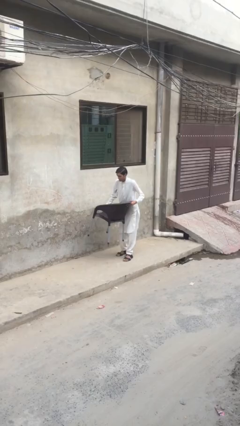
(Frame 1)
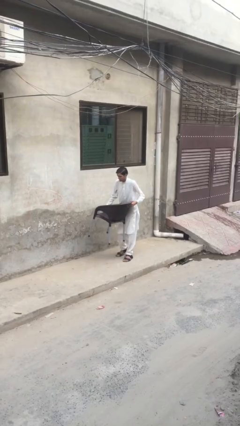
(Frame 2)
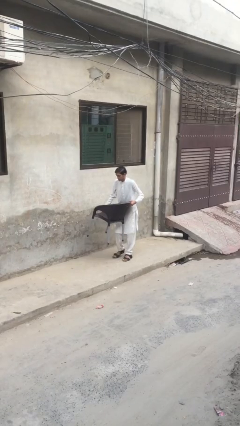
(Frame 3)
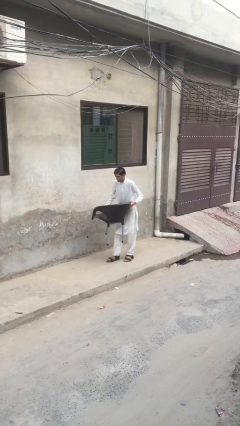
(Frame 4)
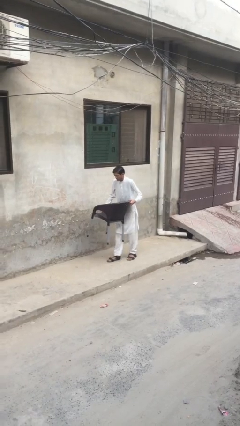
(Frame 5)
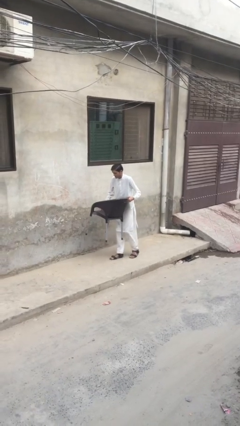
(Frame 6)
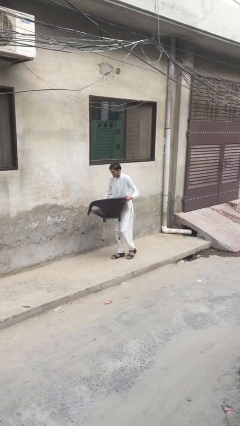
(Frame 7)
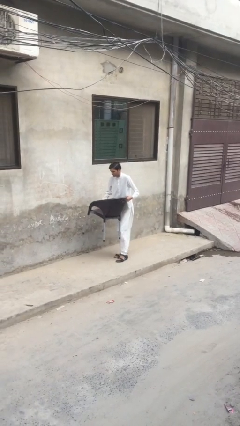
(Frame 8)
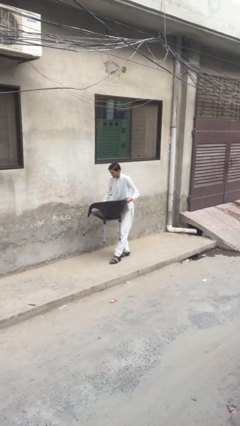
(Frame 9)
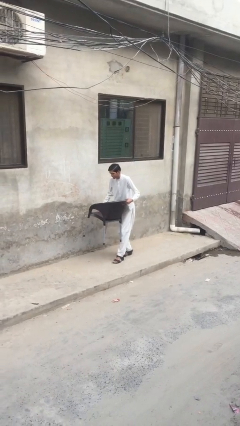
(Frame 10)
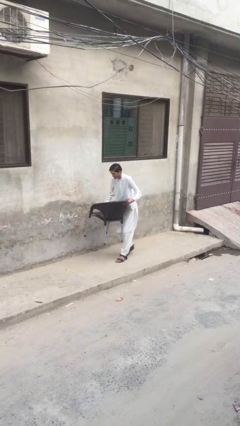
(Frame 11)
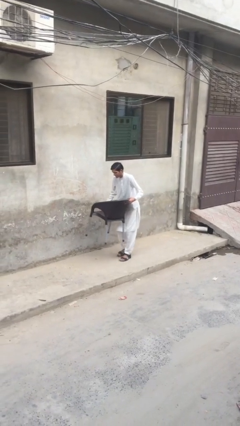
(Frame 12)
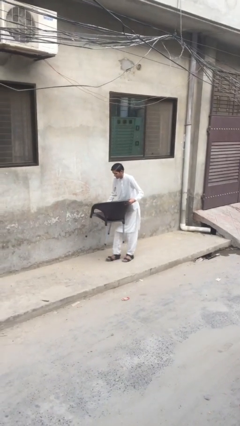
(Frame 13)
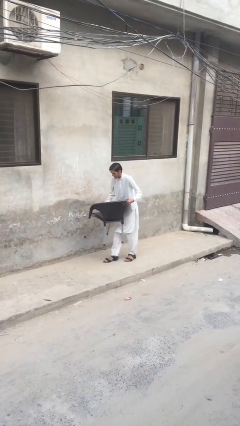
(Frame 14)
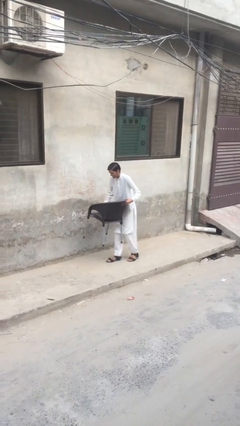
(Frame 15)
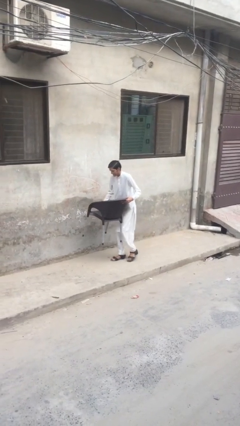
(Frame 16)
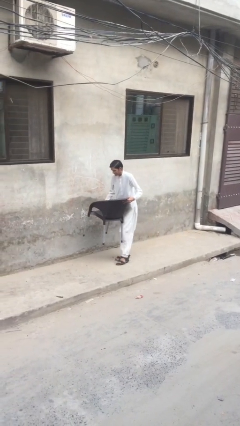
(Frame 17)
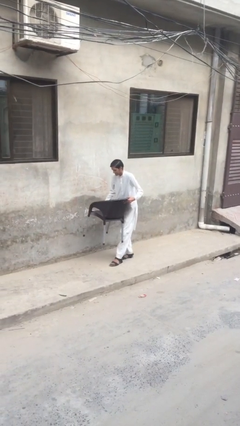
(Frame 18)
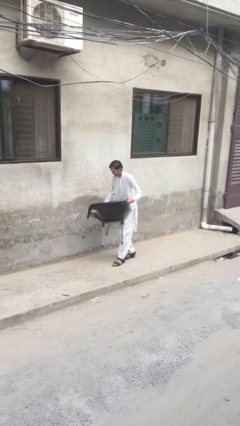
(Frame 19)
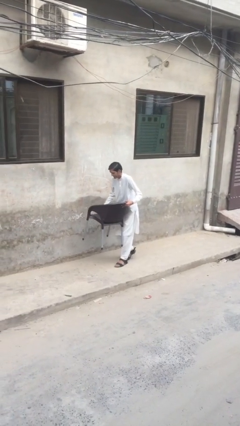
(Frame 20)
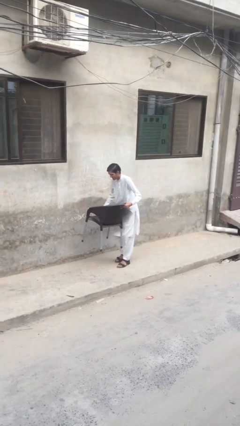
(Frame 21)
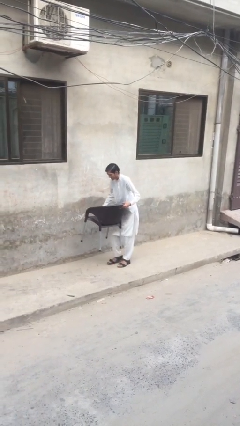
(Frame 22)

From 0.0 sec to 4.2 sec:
person carries heavy object

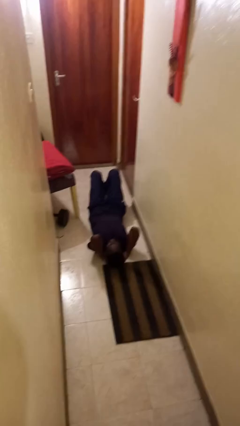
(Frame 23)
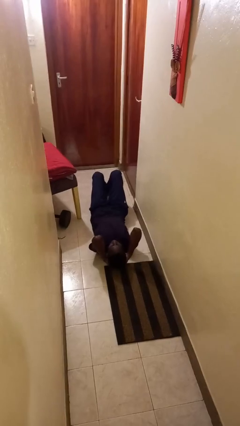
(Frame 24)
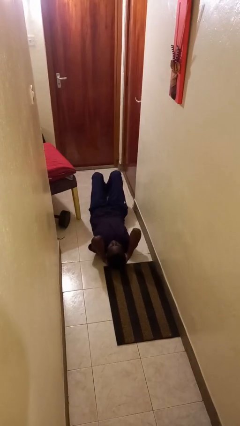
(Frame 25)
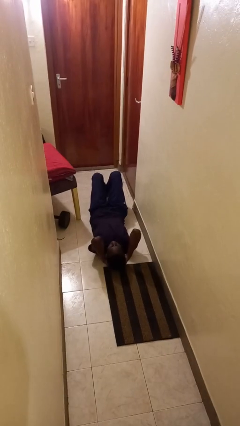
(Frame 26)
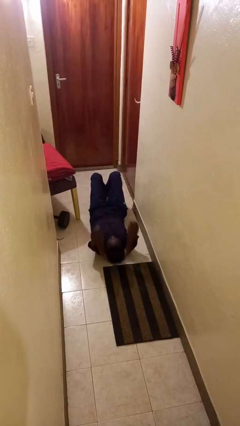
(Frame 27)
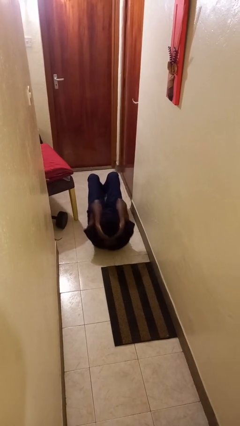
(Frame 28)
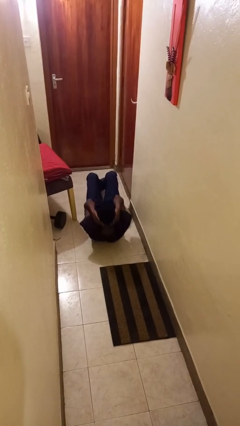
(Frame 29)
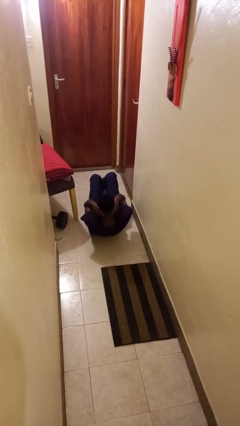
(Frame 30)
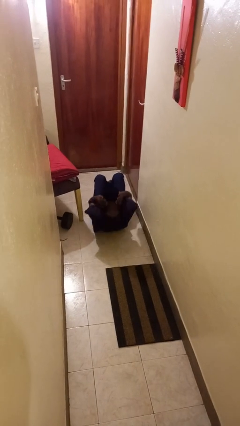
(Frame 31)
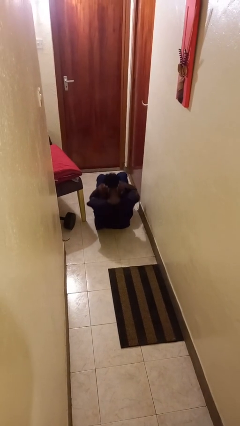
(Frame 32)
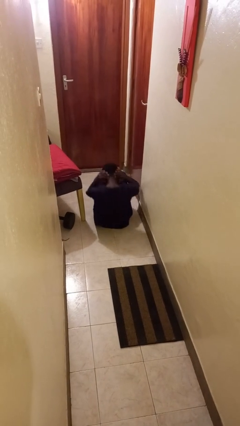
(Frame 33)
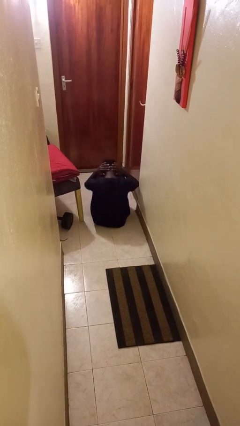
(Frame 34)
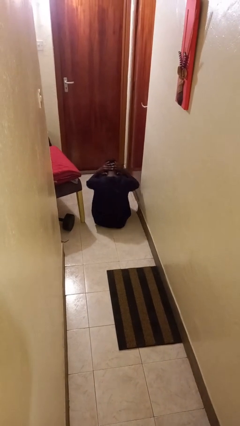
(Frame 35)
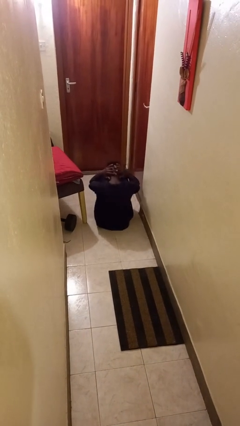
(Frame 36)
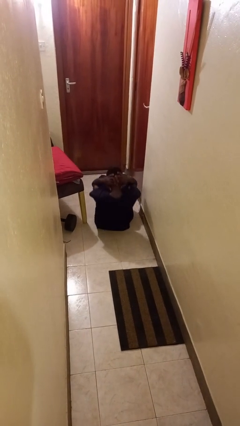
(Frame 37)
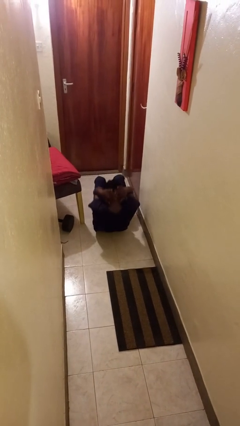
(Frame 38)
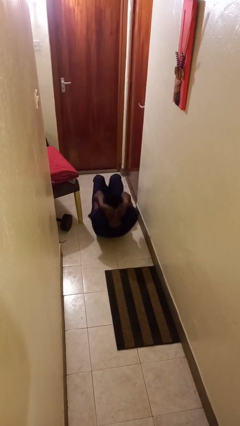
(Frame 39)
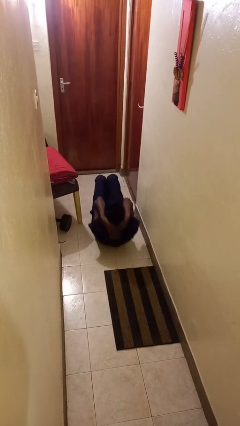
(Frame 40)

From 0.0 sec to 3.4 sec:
person exercises with situp

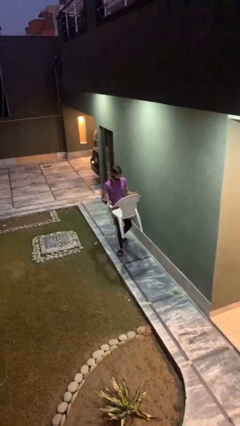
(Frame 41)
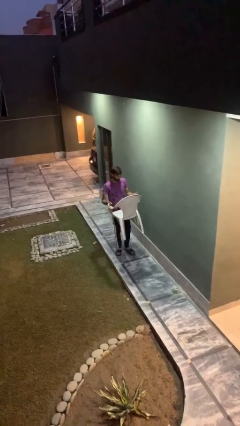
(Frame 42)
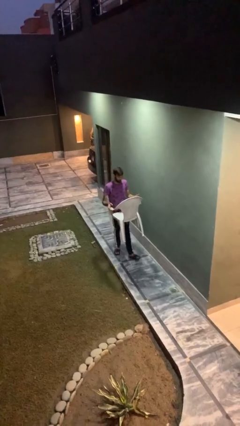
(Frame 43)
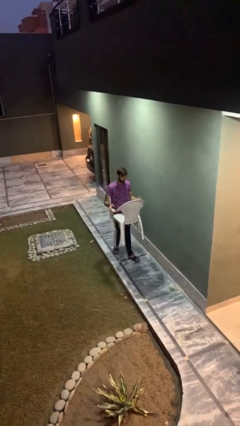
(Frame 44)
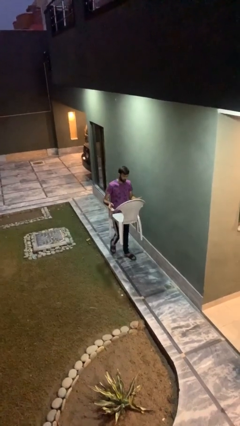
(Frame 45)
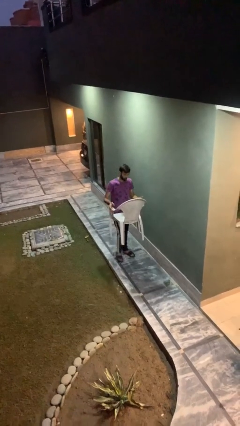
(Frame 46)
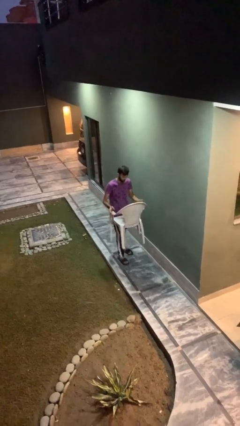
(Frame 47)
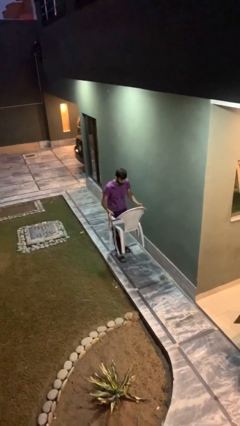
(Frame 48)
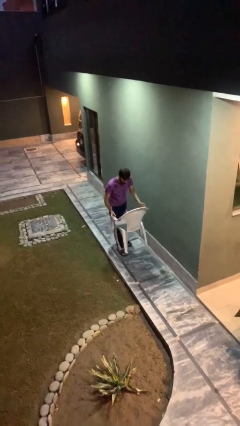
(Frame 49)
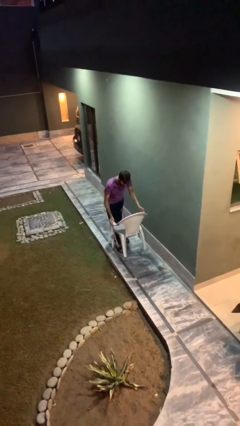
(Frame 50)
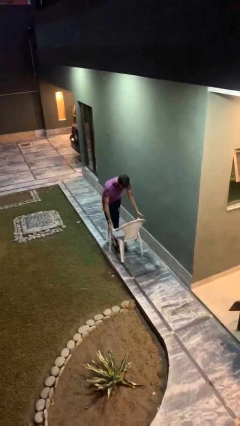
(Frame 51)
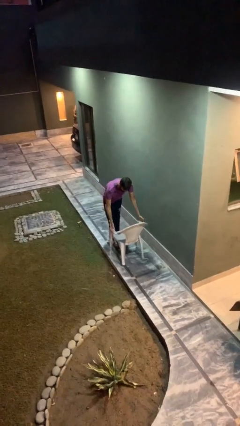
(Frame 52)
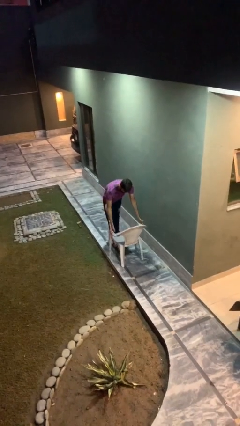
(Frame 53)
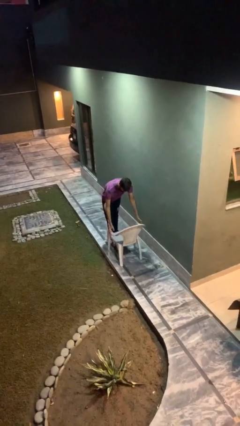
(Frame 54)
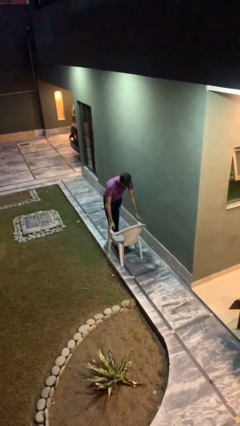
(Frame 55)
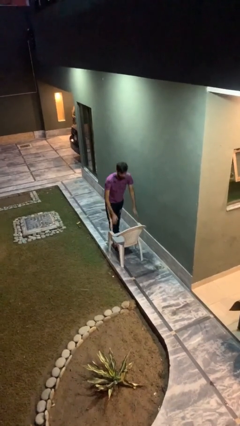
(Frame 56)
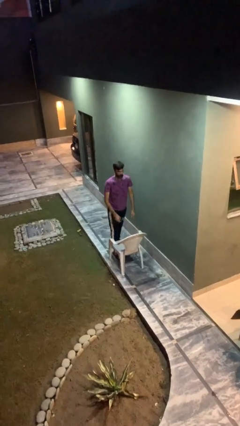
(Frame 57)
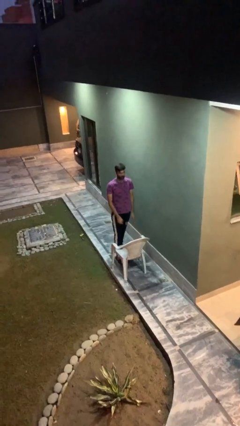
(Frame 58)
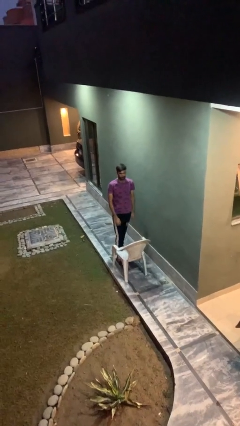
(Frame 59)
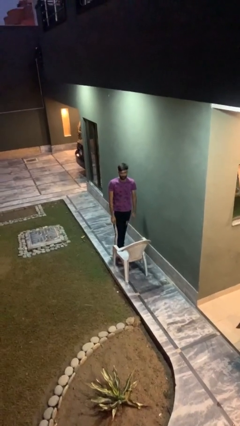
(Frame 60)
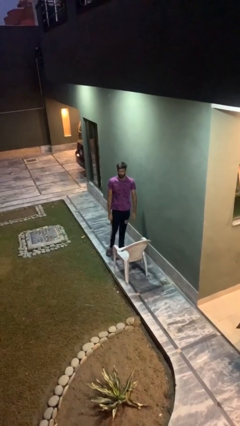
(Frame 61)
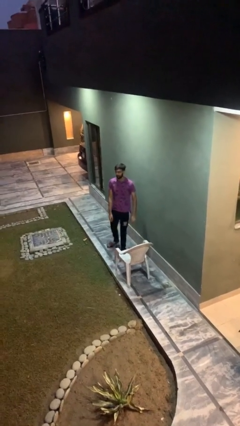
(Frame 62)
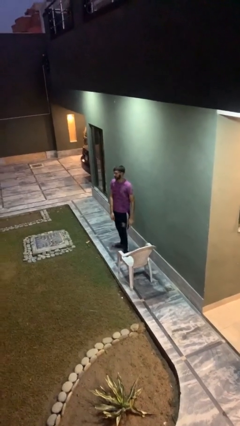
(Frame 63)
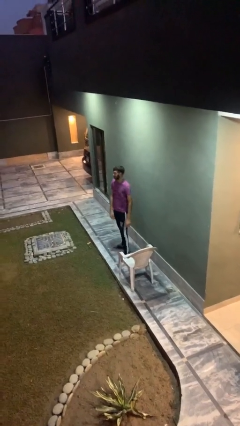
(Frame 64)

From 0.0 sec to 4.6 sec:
person puts down object on floor

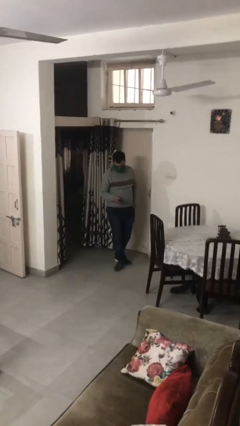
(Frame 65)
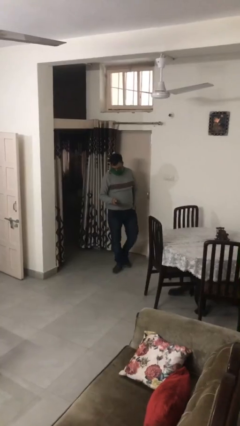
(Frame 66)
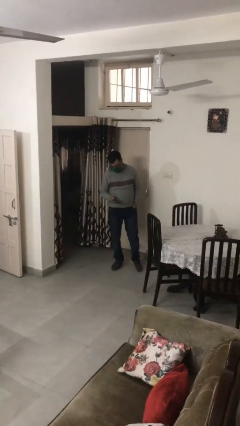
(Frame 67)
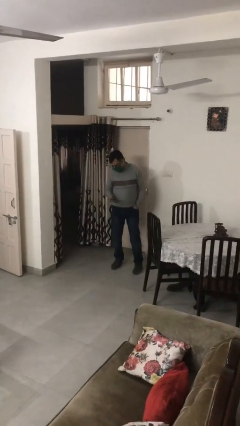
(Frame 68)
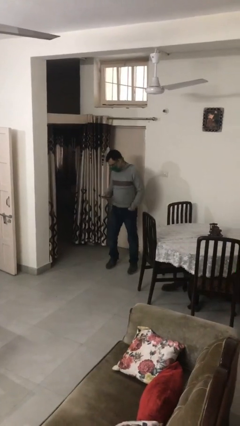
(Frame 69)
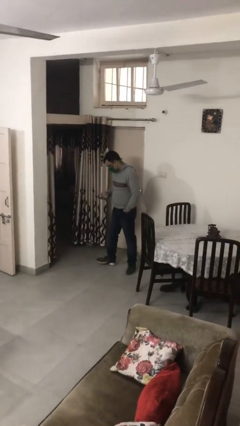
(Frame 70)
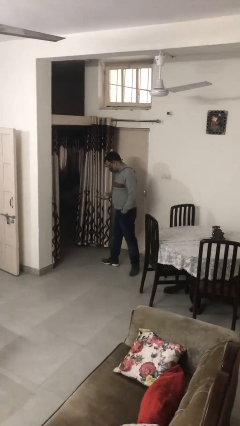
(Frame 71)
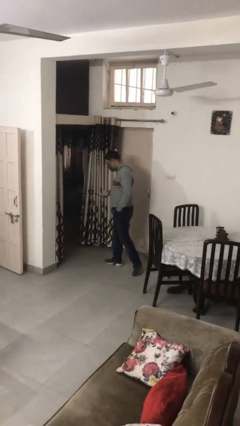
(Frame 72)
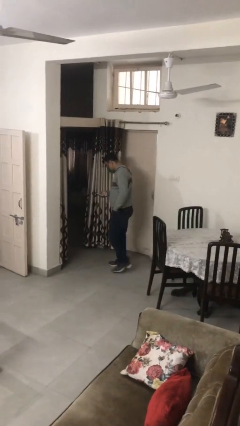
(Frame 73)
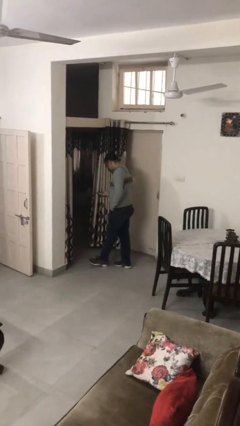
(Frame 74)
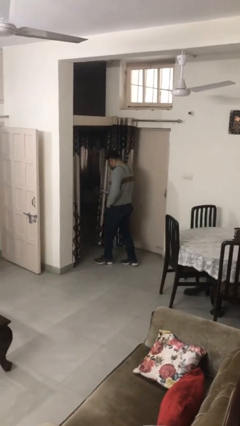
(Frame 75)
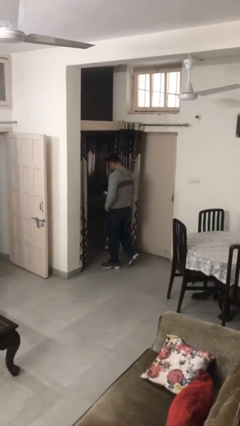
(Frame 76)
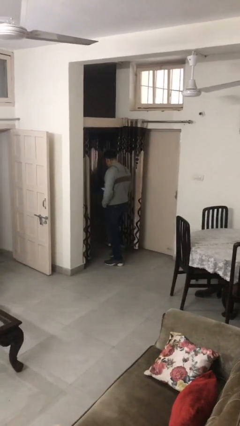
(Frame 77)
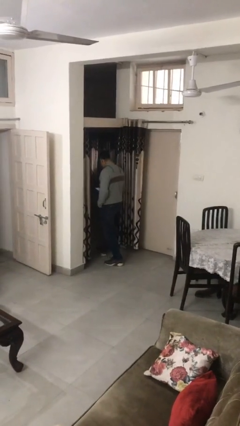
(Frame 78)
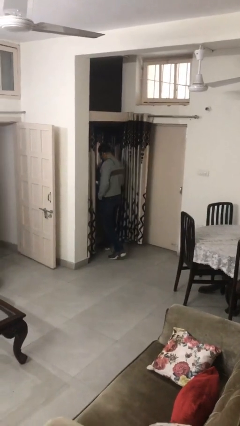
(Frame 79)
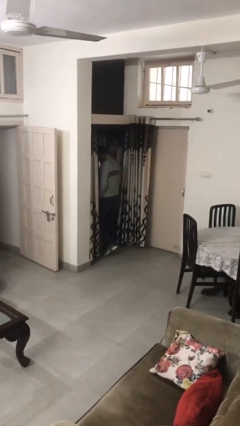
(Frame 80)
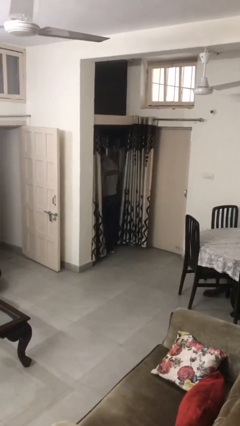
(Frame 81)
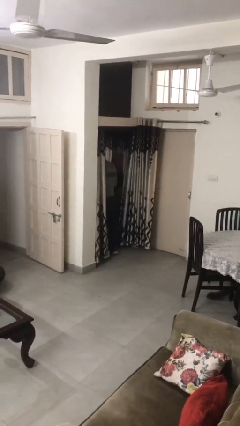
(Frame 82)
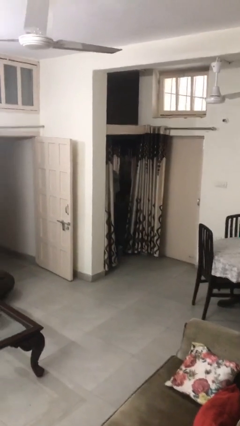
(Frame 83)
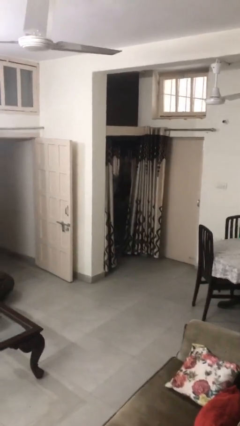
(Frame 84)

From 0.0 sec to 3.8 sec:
person exits scene through structure

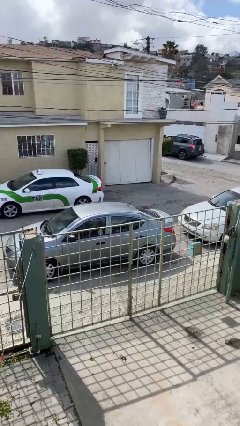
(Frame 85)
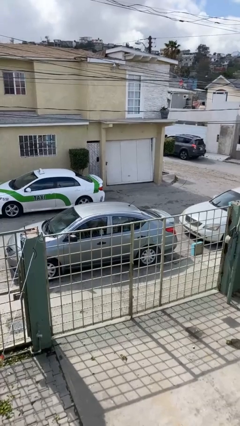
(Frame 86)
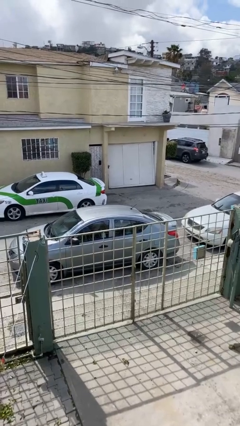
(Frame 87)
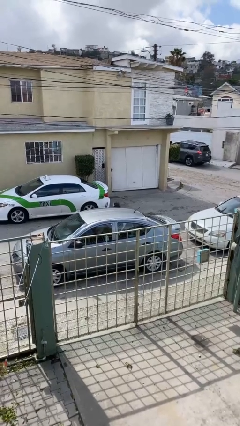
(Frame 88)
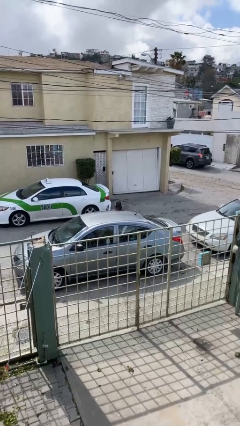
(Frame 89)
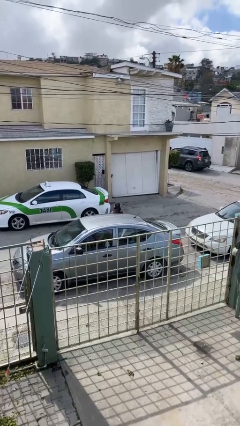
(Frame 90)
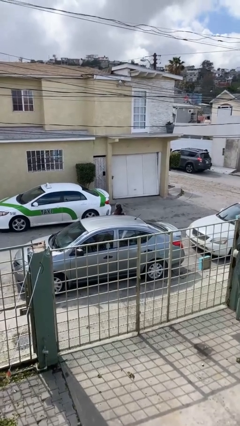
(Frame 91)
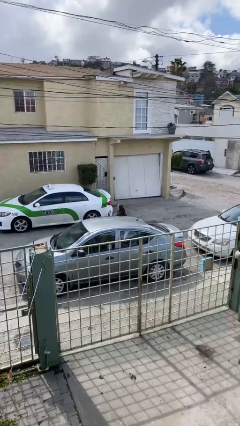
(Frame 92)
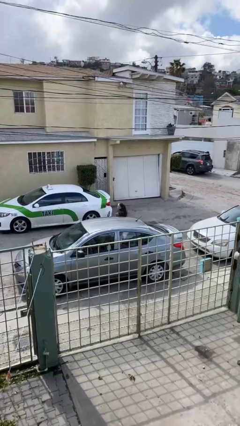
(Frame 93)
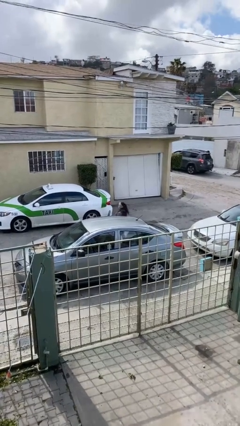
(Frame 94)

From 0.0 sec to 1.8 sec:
person exits car

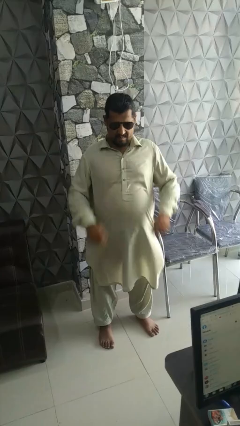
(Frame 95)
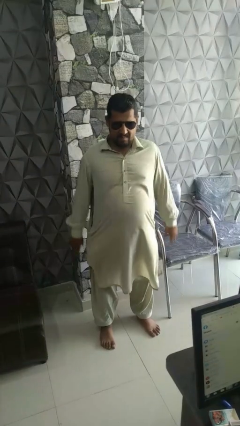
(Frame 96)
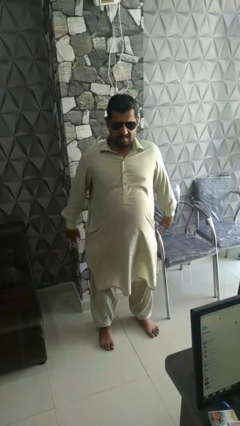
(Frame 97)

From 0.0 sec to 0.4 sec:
person puts on sunglasses
